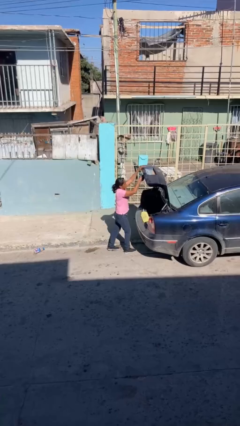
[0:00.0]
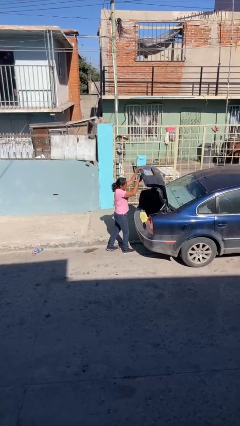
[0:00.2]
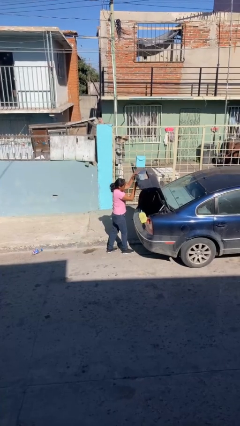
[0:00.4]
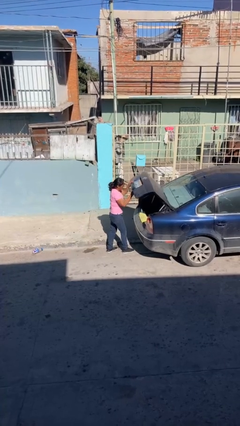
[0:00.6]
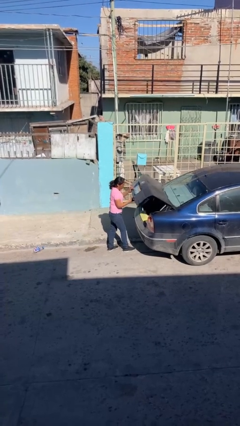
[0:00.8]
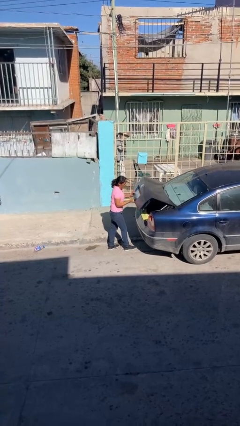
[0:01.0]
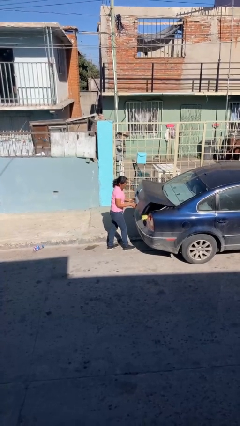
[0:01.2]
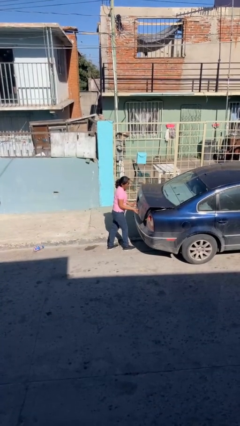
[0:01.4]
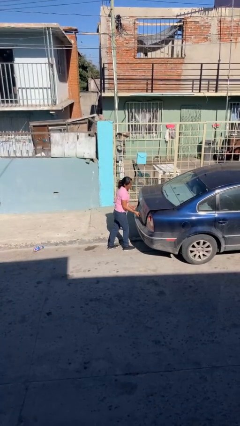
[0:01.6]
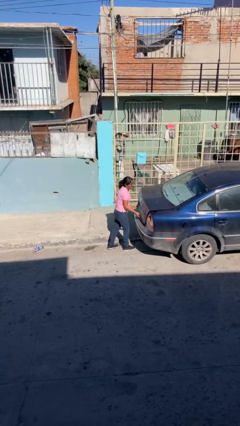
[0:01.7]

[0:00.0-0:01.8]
person closes car trunk

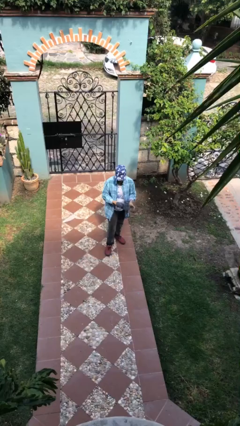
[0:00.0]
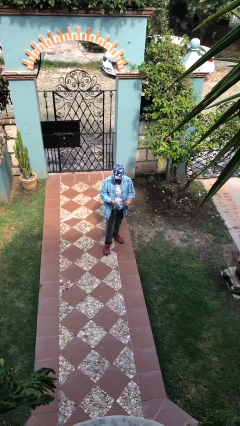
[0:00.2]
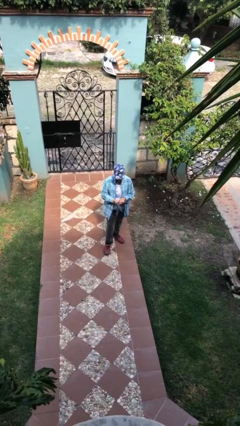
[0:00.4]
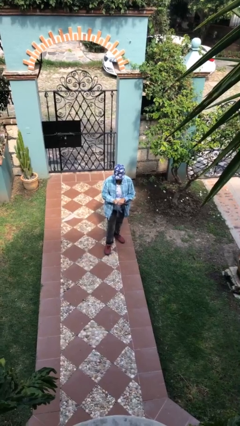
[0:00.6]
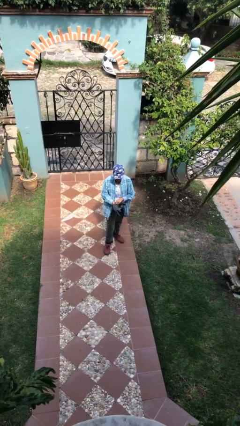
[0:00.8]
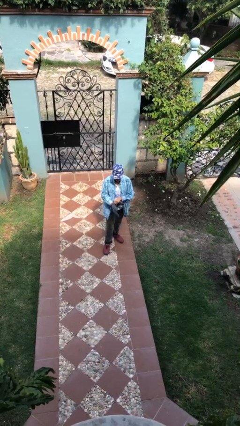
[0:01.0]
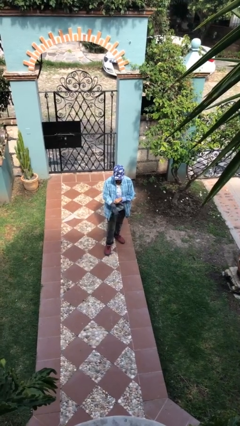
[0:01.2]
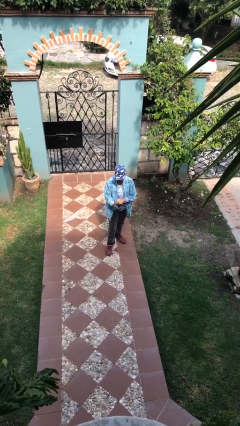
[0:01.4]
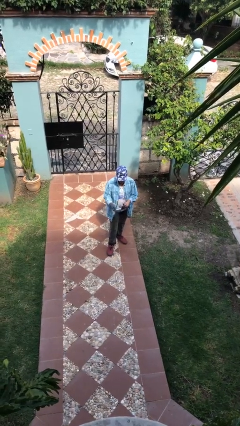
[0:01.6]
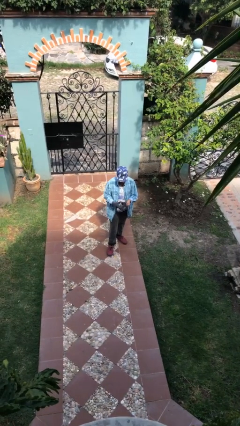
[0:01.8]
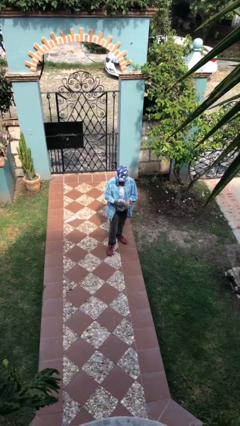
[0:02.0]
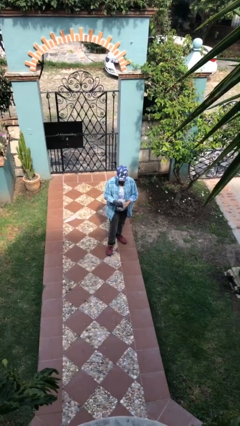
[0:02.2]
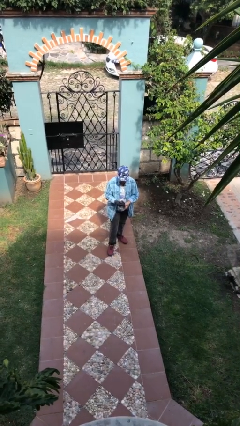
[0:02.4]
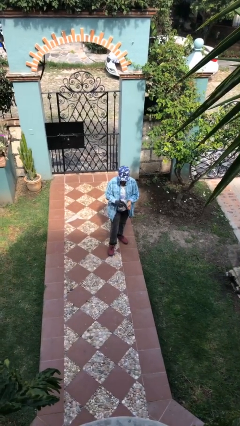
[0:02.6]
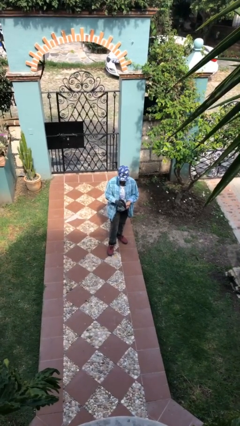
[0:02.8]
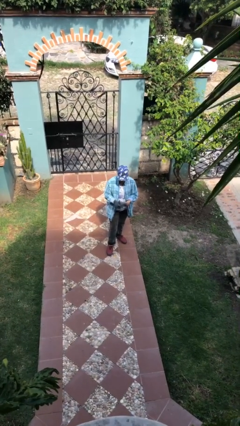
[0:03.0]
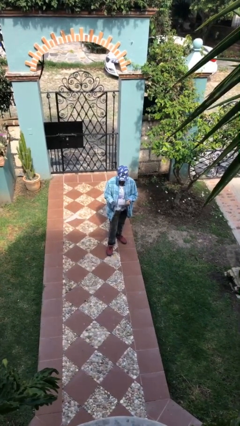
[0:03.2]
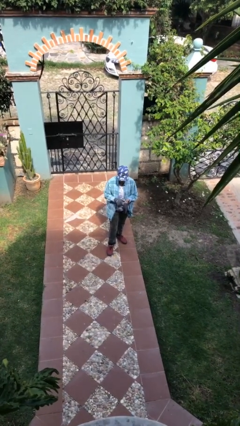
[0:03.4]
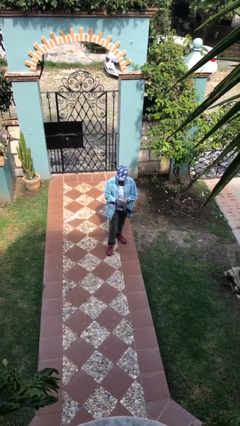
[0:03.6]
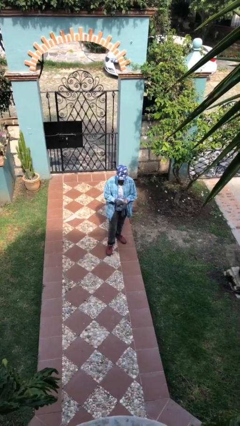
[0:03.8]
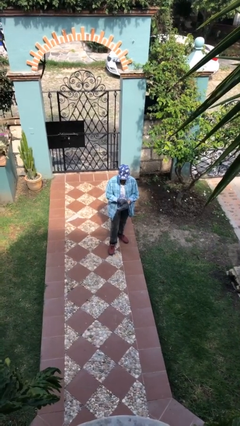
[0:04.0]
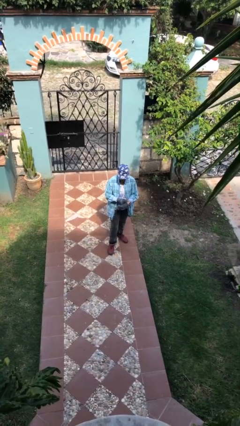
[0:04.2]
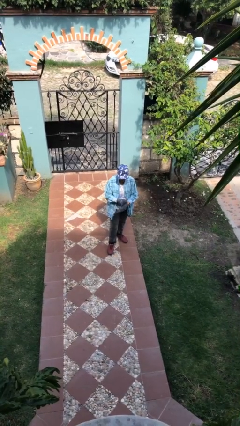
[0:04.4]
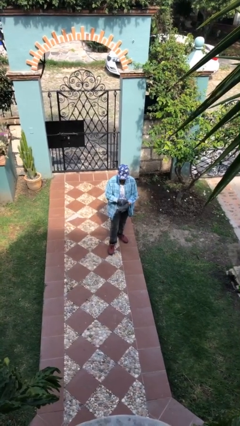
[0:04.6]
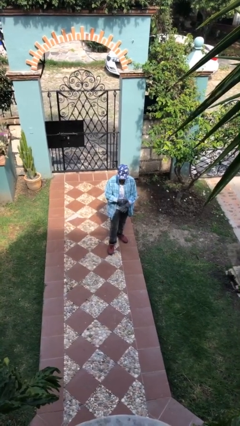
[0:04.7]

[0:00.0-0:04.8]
person puts on gloves

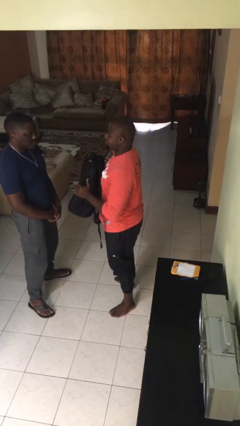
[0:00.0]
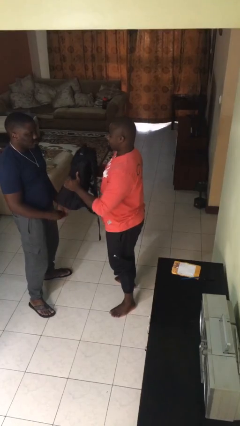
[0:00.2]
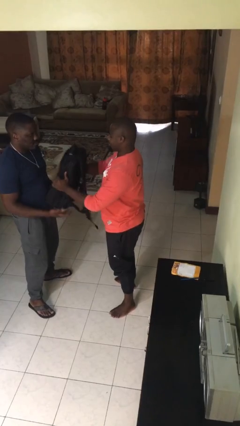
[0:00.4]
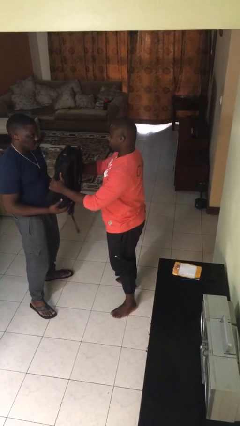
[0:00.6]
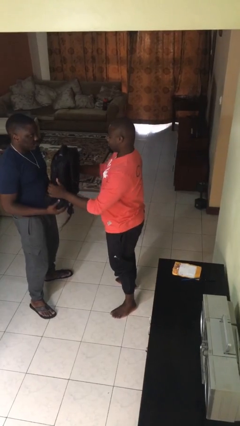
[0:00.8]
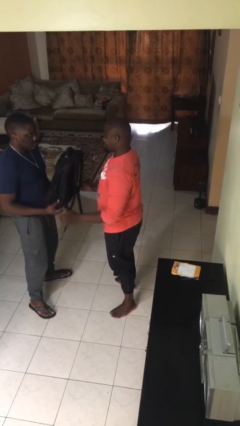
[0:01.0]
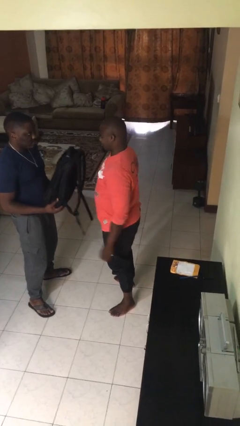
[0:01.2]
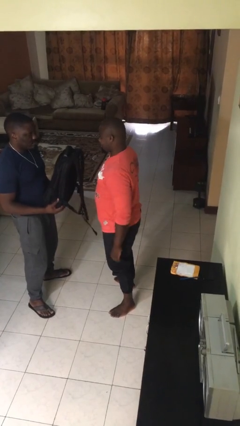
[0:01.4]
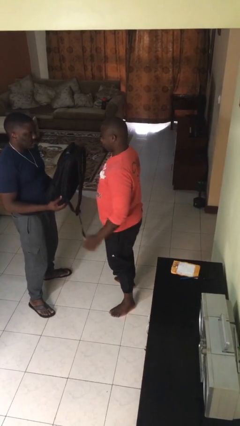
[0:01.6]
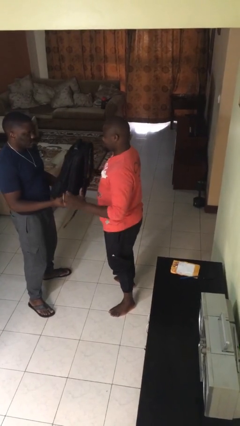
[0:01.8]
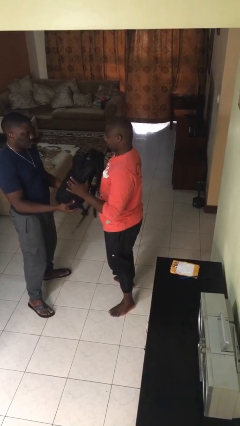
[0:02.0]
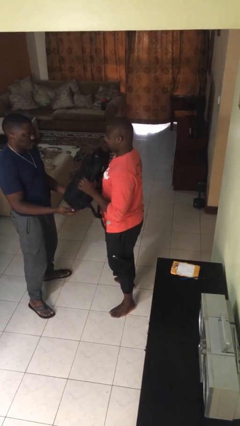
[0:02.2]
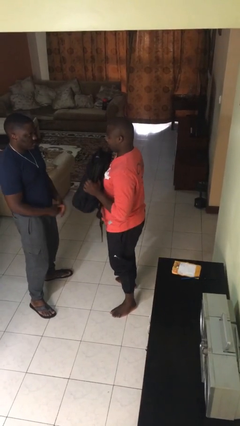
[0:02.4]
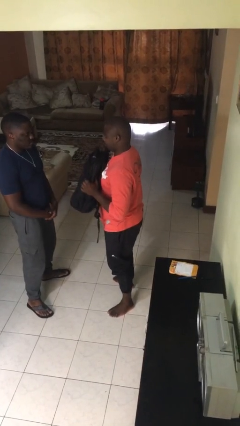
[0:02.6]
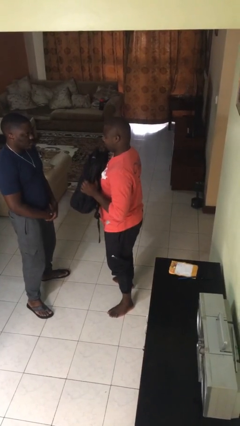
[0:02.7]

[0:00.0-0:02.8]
person transfers object to person

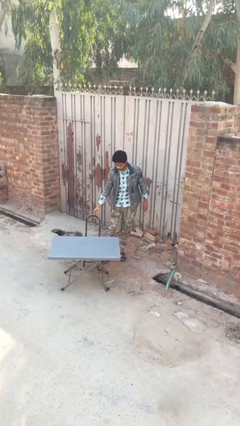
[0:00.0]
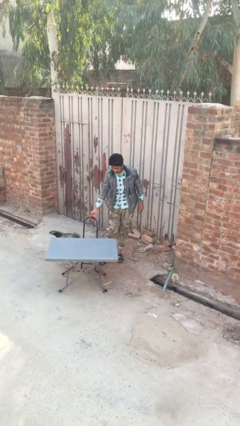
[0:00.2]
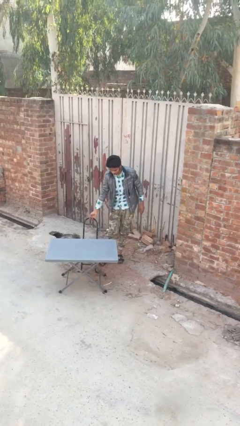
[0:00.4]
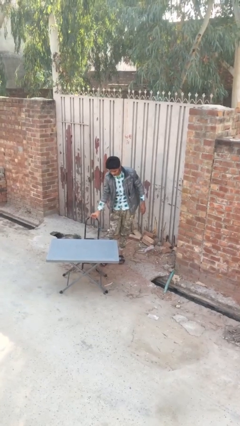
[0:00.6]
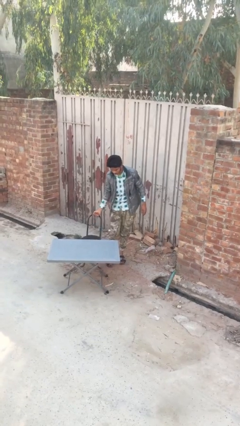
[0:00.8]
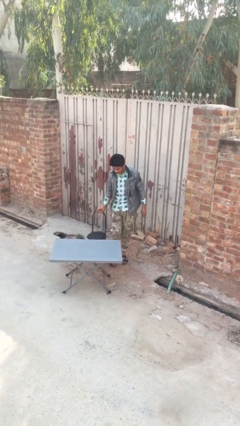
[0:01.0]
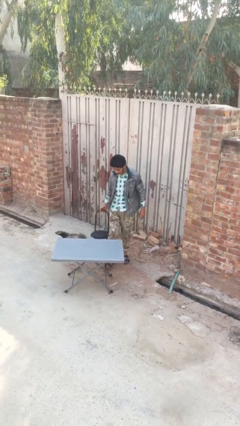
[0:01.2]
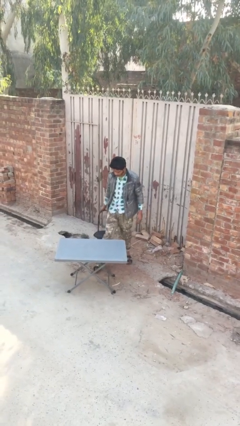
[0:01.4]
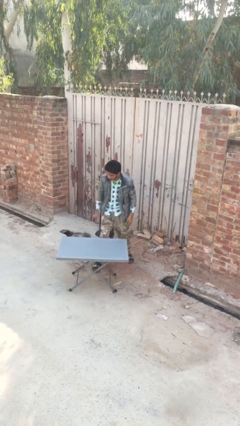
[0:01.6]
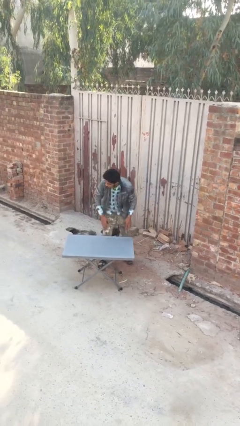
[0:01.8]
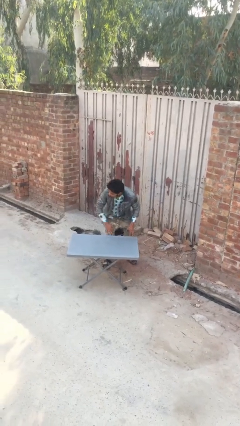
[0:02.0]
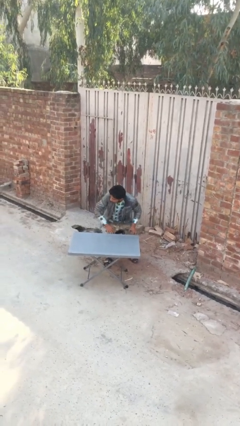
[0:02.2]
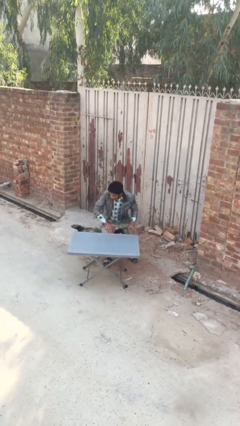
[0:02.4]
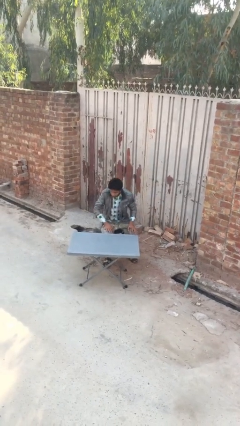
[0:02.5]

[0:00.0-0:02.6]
person sits down

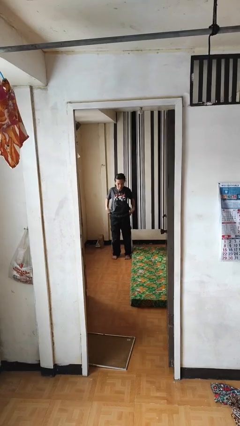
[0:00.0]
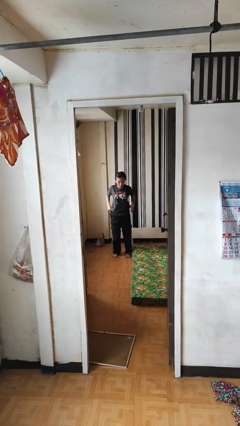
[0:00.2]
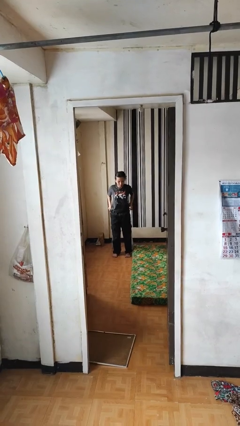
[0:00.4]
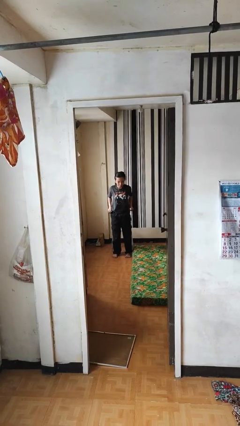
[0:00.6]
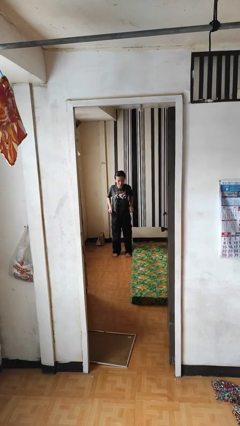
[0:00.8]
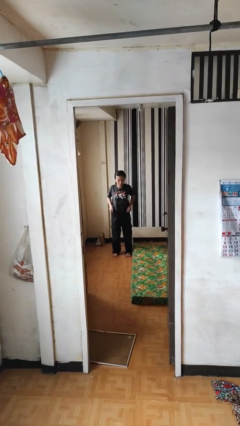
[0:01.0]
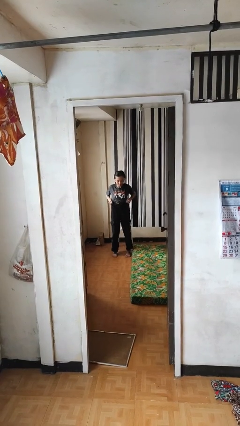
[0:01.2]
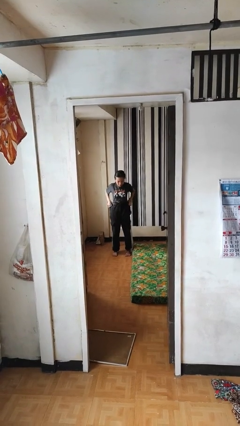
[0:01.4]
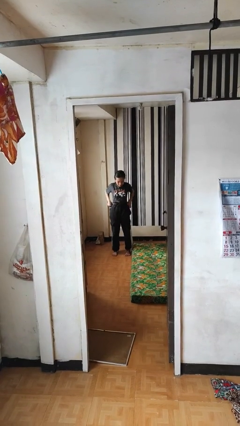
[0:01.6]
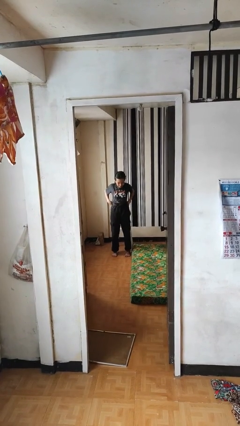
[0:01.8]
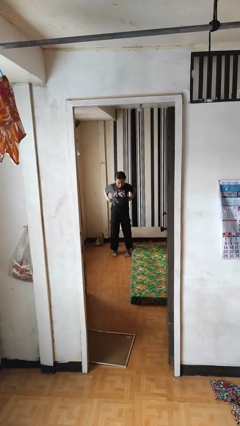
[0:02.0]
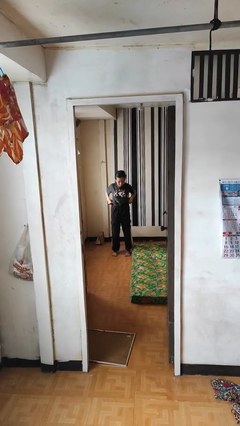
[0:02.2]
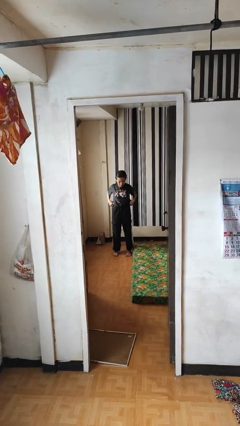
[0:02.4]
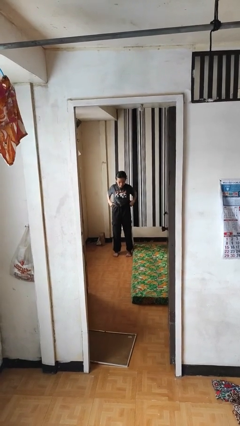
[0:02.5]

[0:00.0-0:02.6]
person hikes up pants

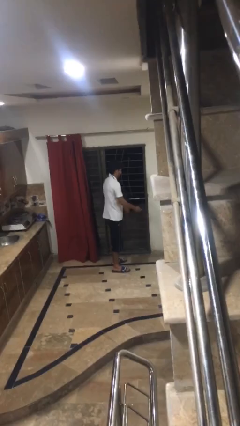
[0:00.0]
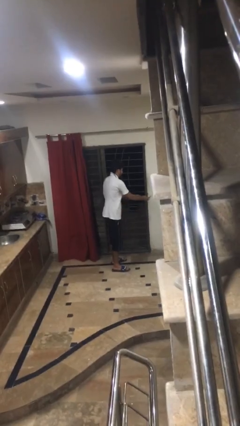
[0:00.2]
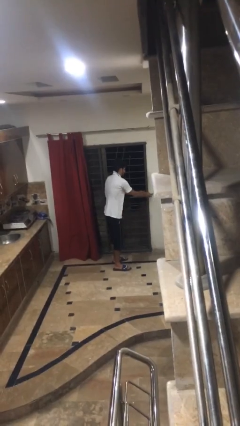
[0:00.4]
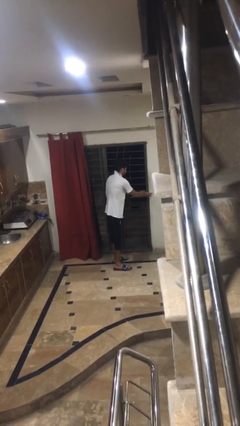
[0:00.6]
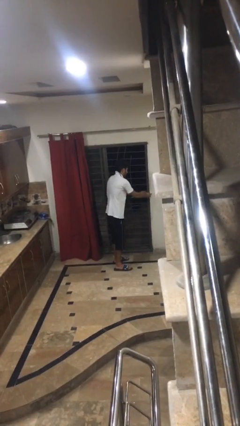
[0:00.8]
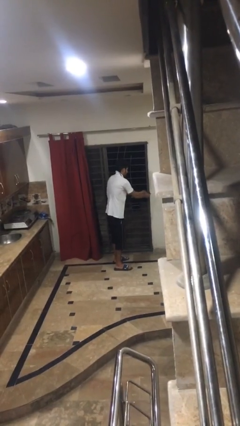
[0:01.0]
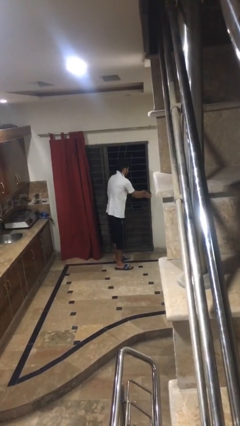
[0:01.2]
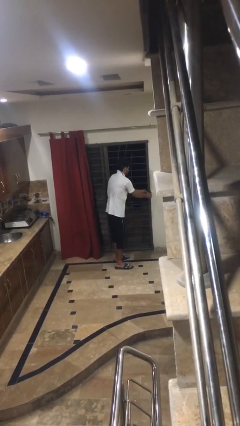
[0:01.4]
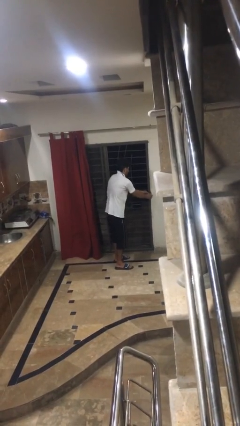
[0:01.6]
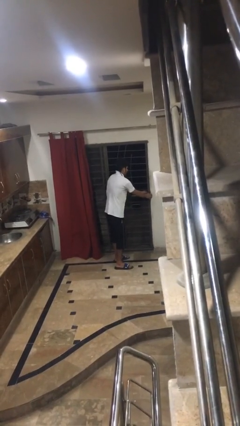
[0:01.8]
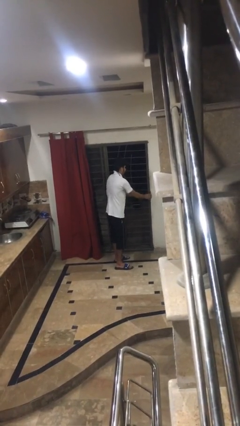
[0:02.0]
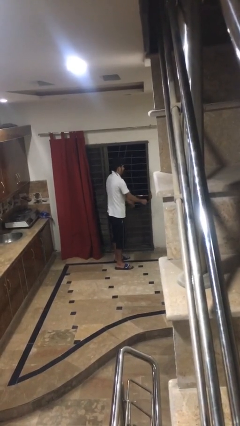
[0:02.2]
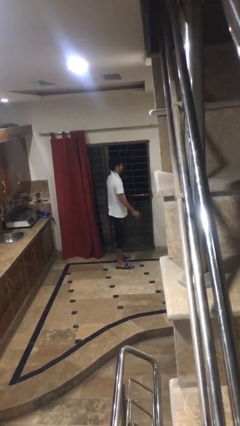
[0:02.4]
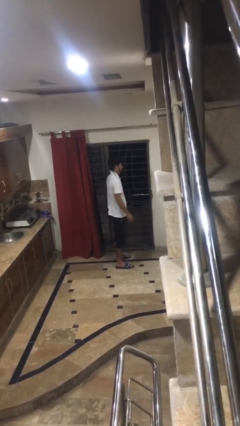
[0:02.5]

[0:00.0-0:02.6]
person locks door with keys
